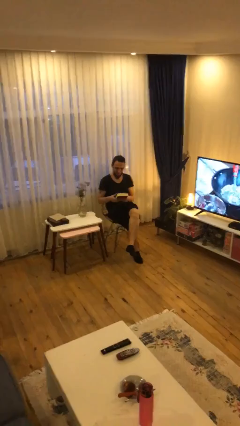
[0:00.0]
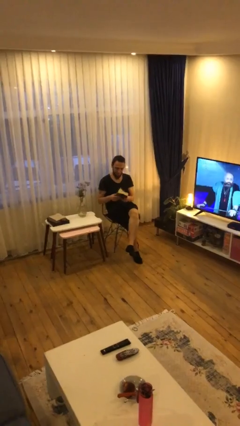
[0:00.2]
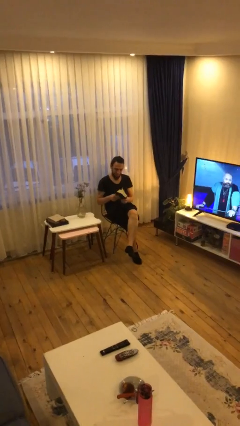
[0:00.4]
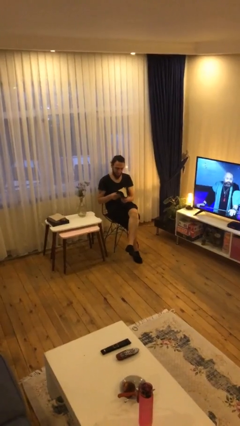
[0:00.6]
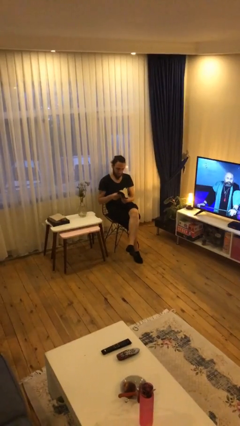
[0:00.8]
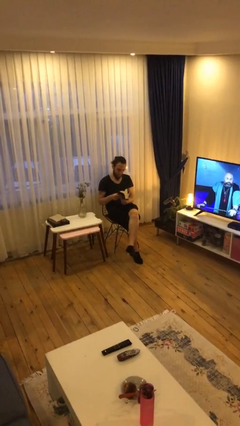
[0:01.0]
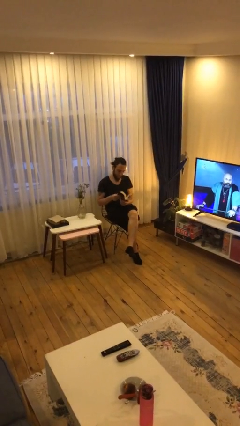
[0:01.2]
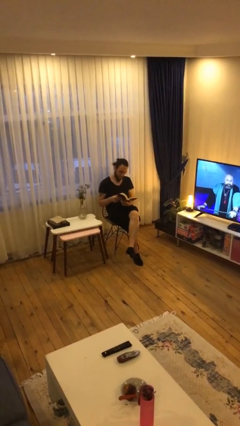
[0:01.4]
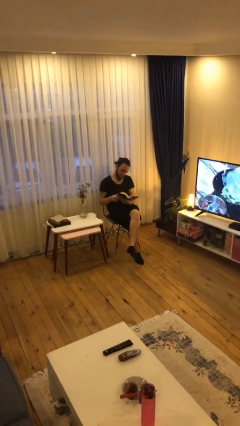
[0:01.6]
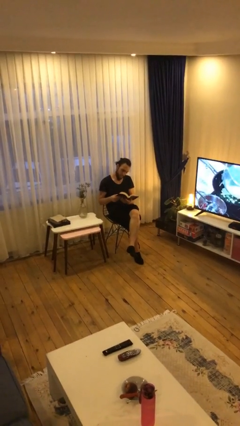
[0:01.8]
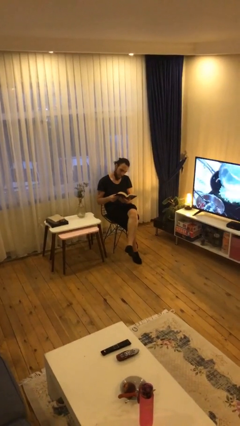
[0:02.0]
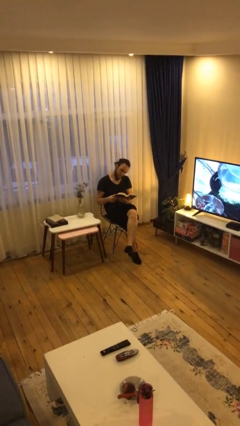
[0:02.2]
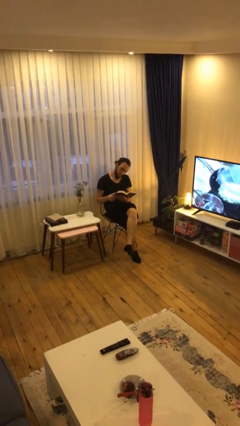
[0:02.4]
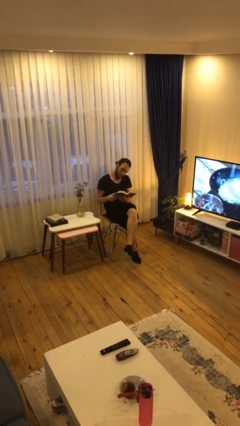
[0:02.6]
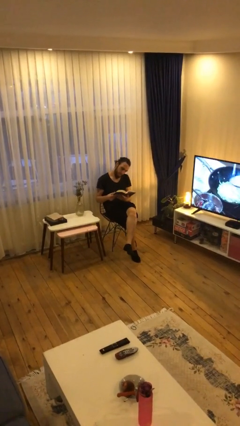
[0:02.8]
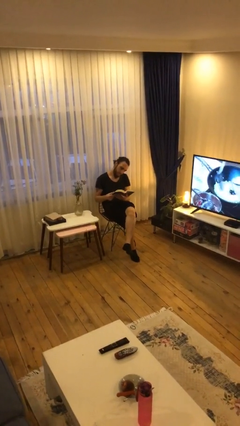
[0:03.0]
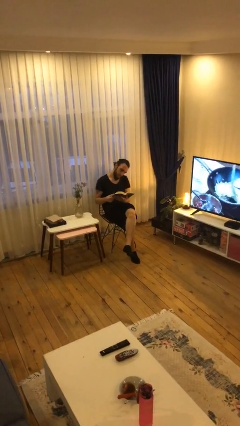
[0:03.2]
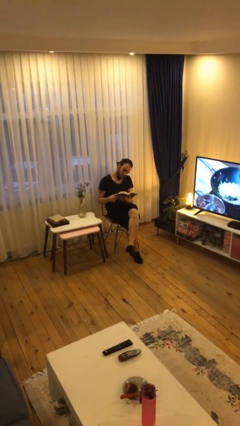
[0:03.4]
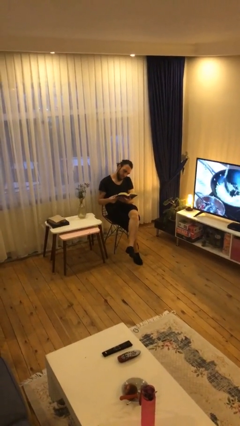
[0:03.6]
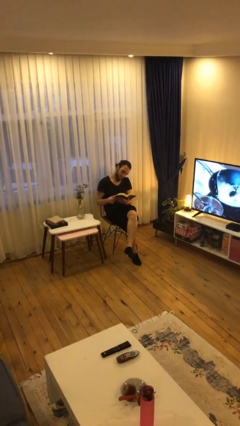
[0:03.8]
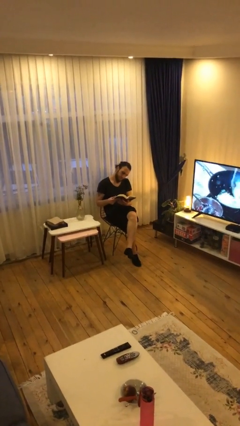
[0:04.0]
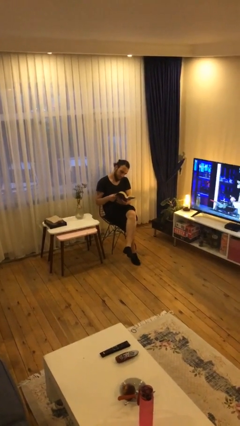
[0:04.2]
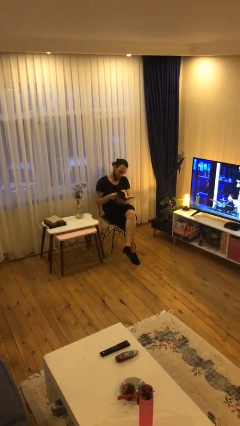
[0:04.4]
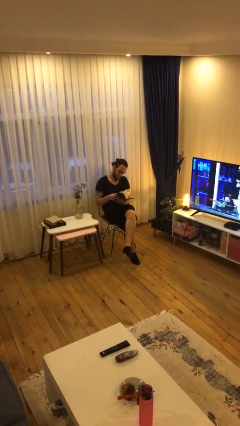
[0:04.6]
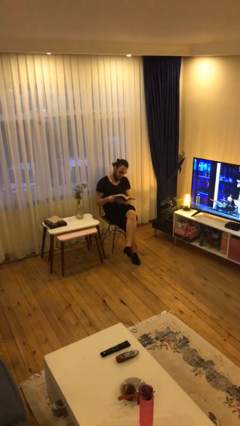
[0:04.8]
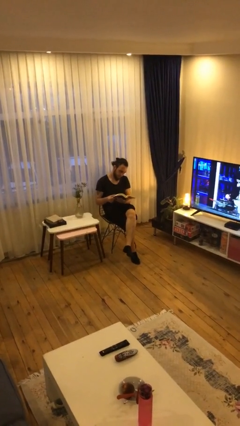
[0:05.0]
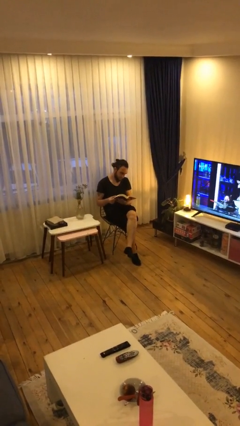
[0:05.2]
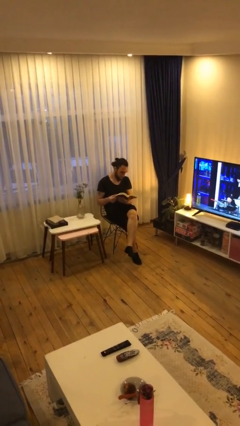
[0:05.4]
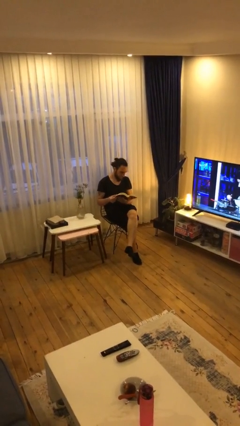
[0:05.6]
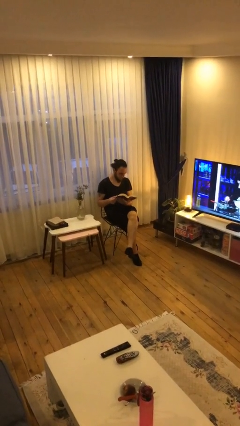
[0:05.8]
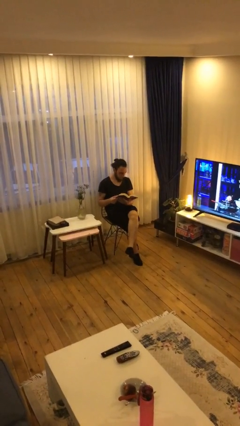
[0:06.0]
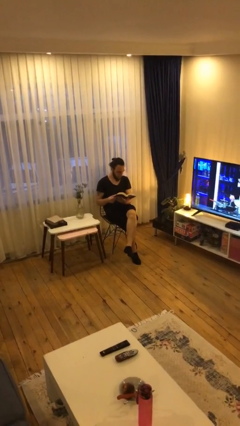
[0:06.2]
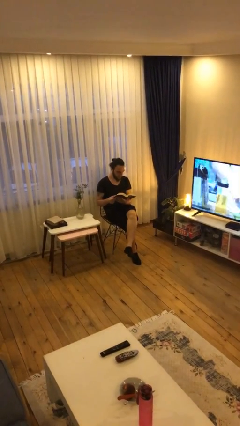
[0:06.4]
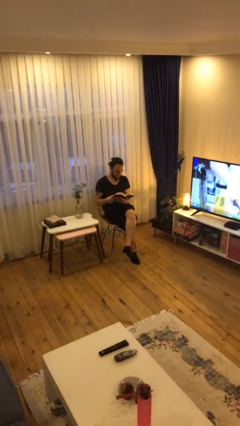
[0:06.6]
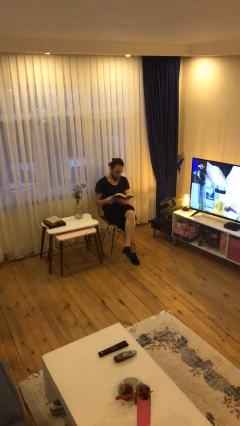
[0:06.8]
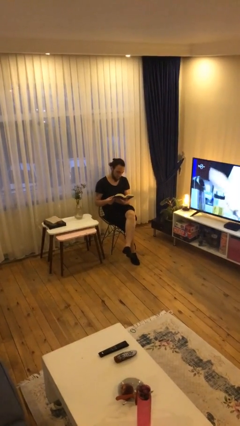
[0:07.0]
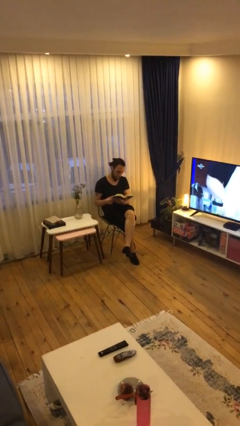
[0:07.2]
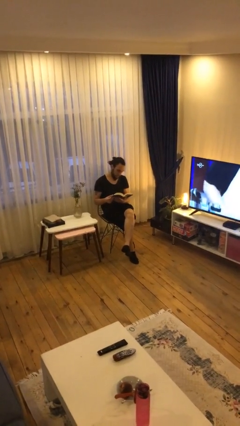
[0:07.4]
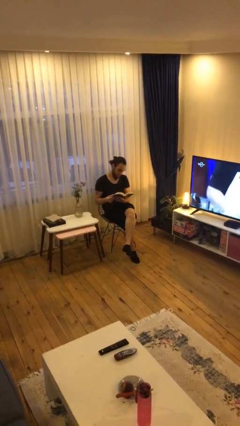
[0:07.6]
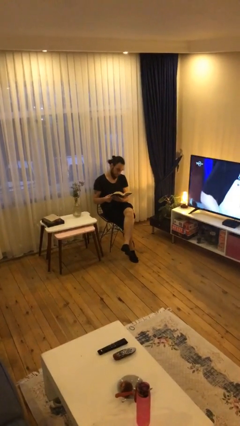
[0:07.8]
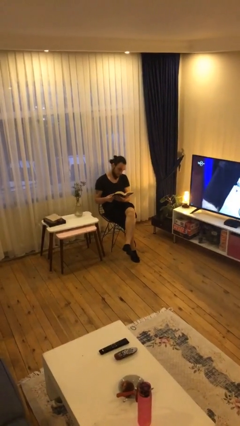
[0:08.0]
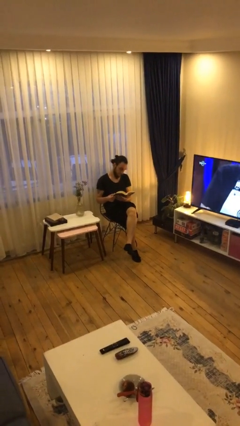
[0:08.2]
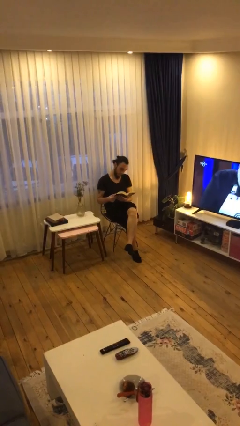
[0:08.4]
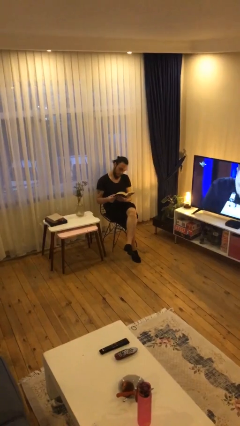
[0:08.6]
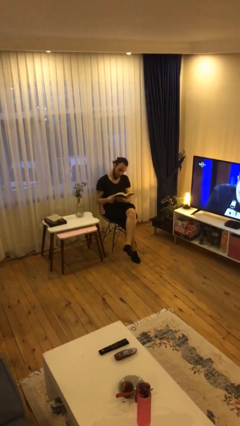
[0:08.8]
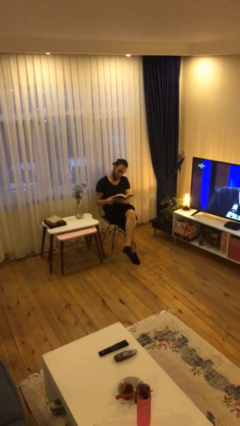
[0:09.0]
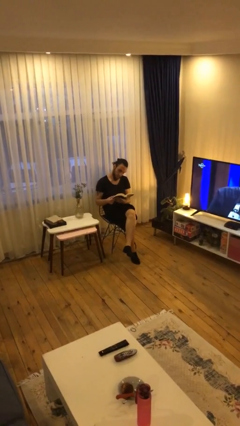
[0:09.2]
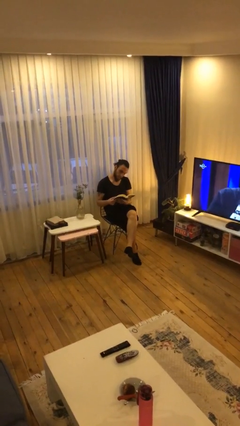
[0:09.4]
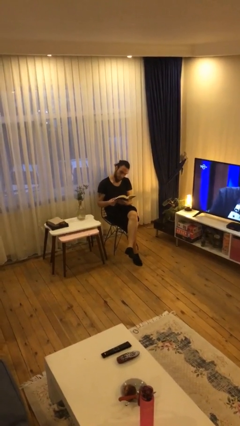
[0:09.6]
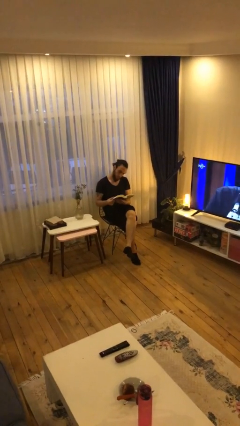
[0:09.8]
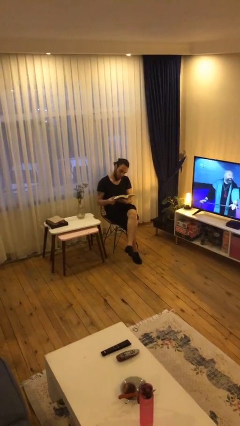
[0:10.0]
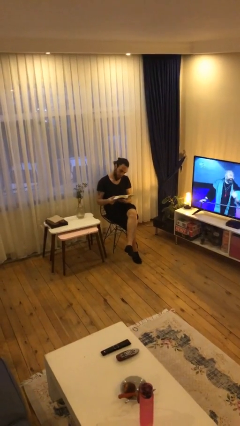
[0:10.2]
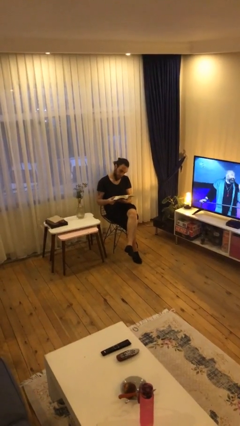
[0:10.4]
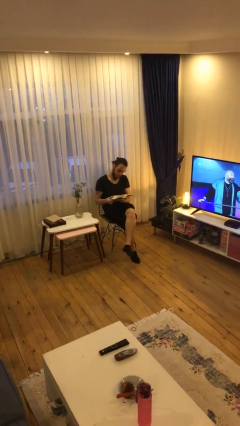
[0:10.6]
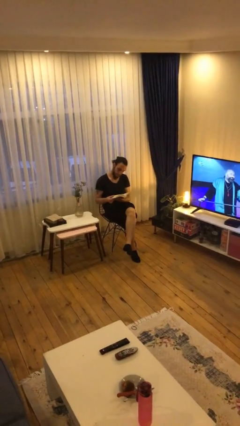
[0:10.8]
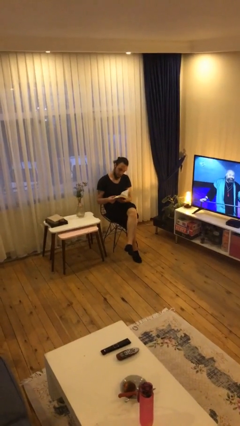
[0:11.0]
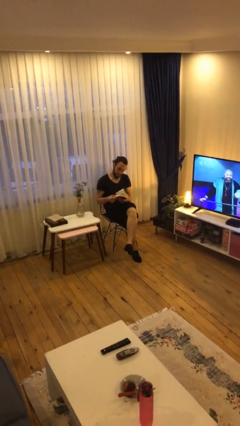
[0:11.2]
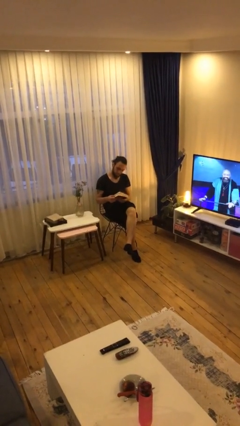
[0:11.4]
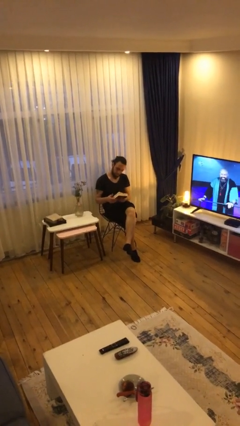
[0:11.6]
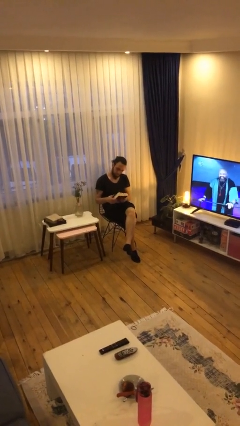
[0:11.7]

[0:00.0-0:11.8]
person reads document

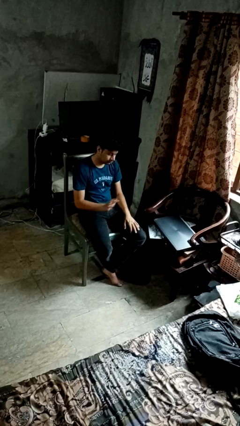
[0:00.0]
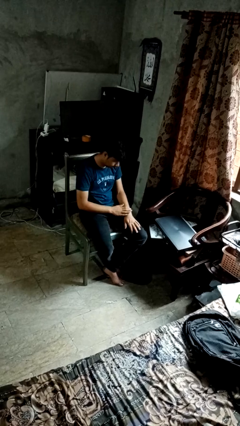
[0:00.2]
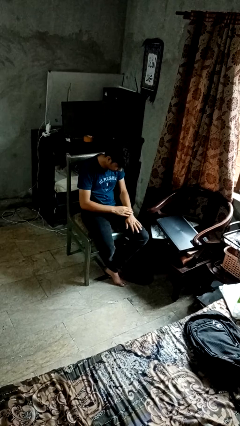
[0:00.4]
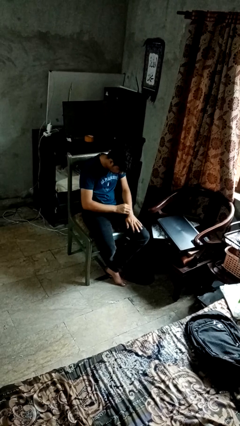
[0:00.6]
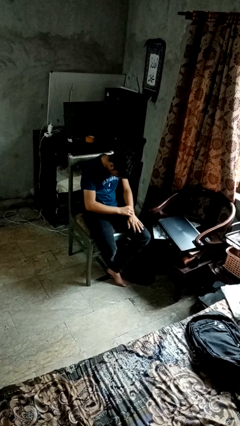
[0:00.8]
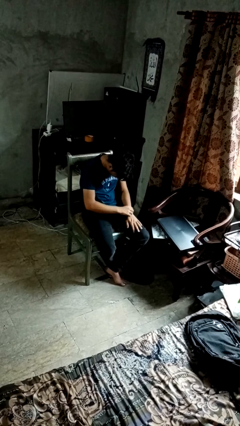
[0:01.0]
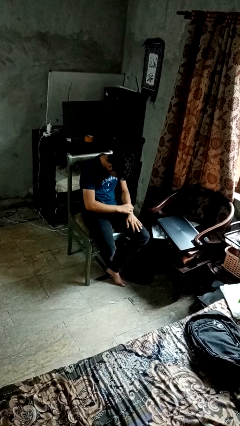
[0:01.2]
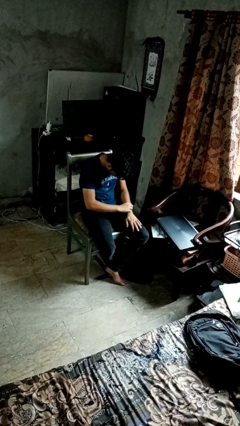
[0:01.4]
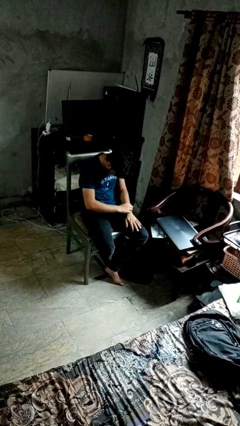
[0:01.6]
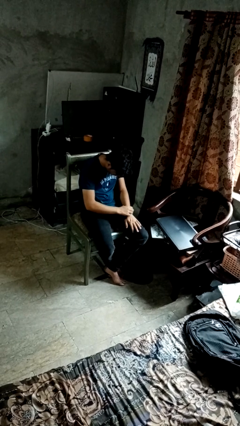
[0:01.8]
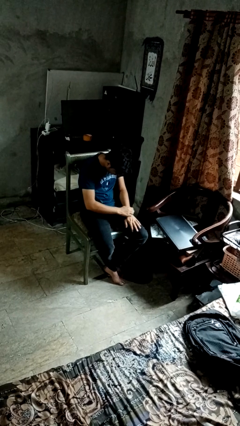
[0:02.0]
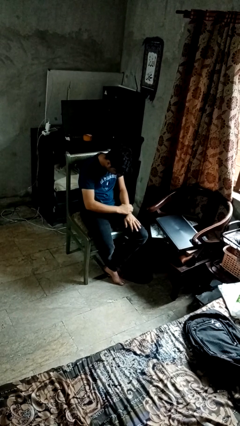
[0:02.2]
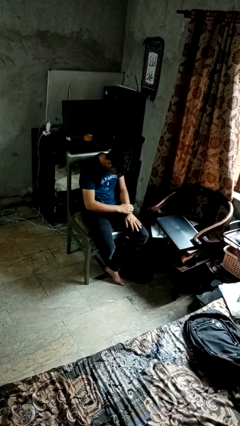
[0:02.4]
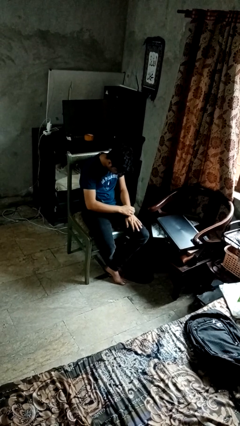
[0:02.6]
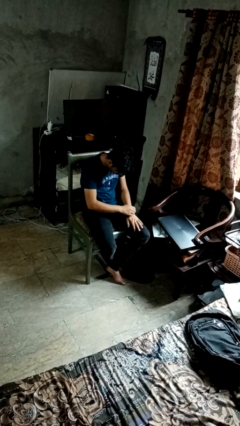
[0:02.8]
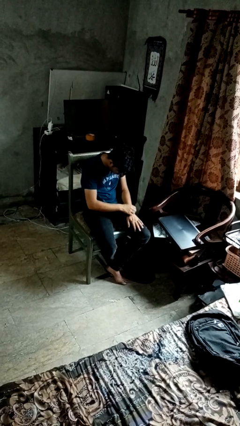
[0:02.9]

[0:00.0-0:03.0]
person swats bug

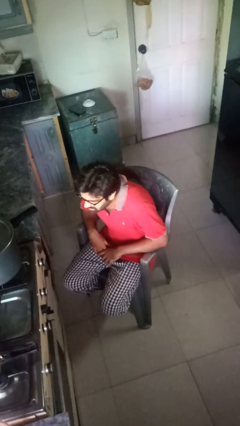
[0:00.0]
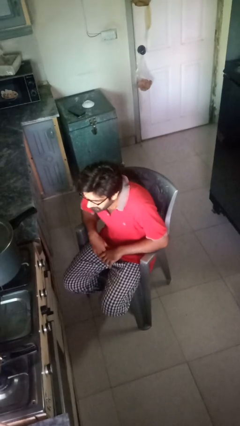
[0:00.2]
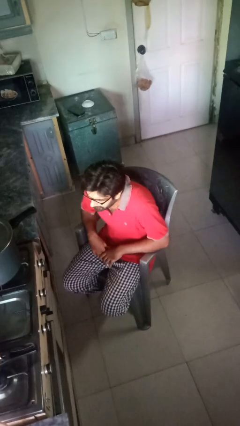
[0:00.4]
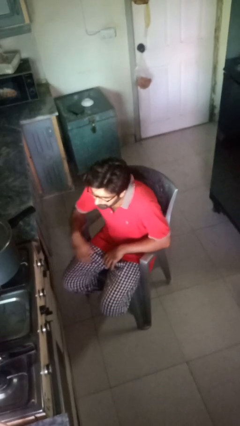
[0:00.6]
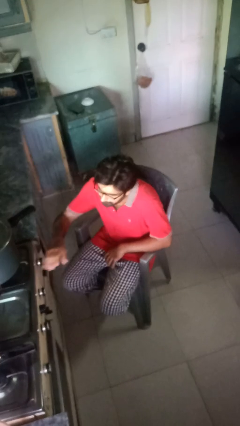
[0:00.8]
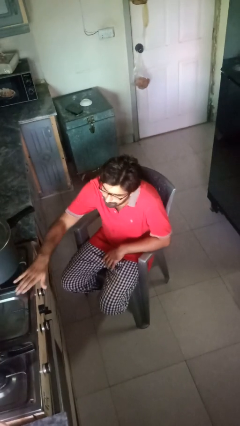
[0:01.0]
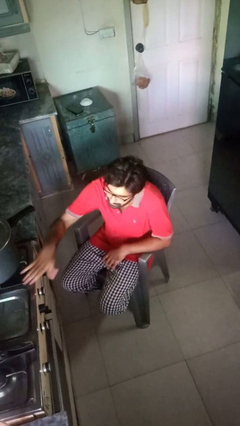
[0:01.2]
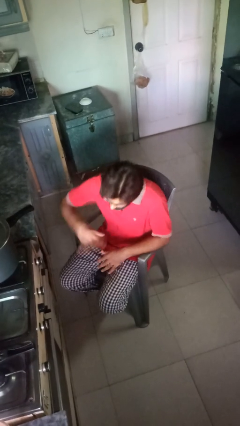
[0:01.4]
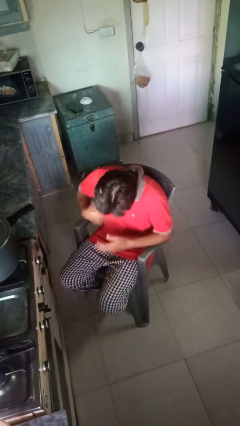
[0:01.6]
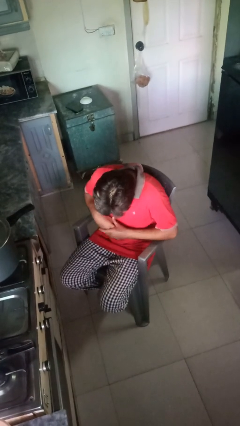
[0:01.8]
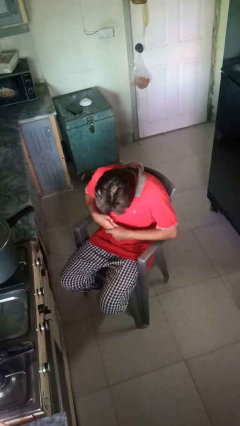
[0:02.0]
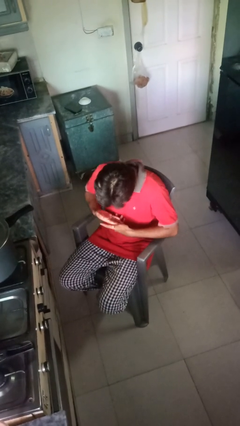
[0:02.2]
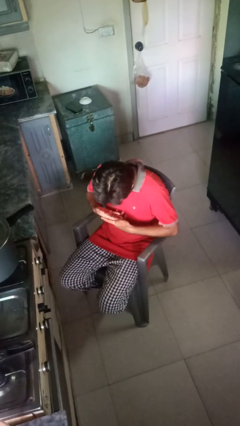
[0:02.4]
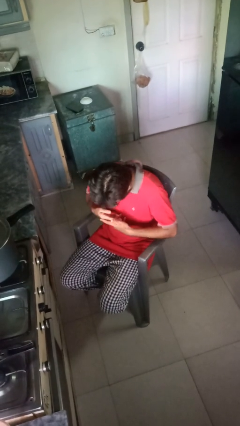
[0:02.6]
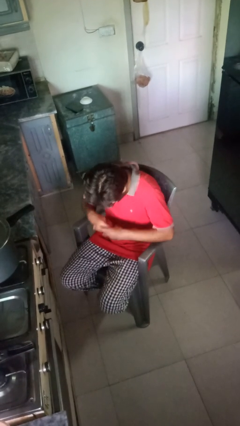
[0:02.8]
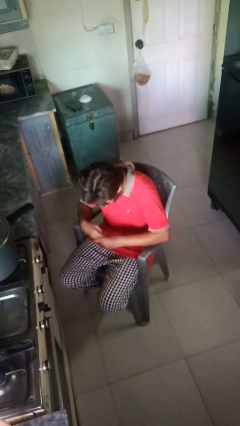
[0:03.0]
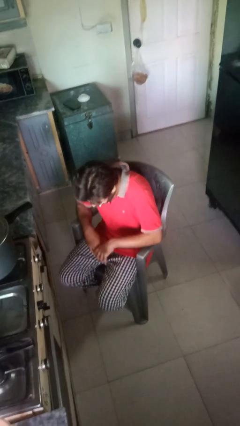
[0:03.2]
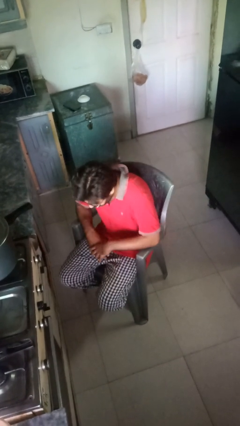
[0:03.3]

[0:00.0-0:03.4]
person burns hand
